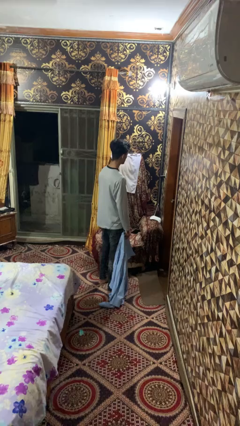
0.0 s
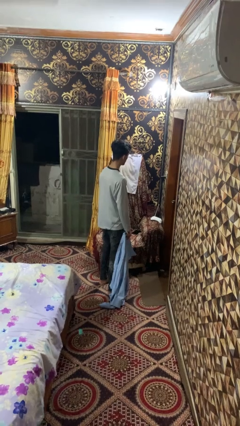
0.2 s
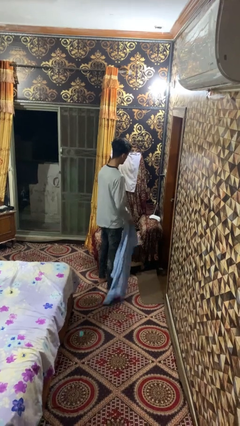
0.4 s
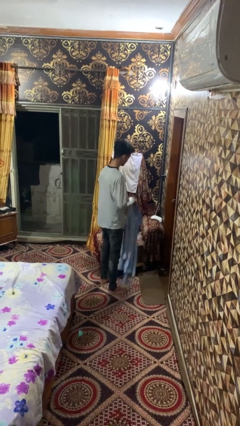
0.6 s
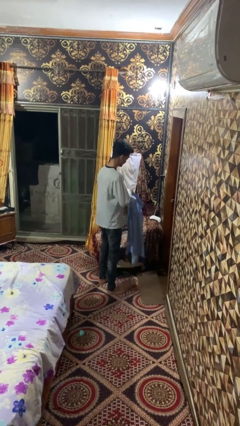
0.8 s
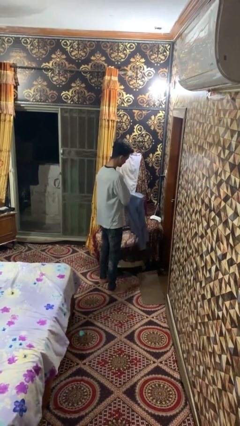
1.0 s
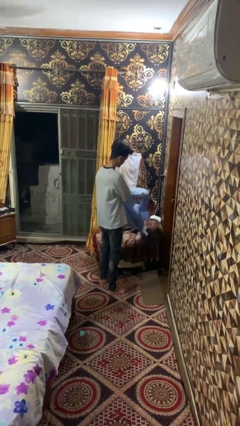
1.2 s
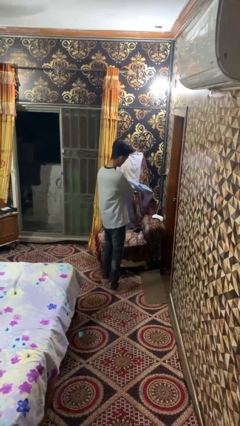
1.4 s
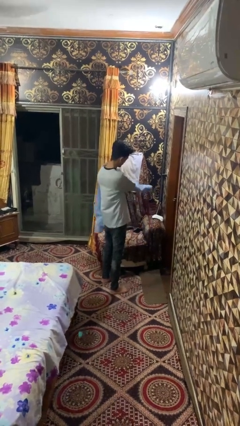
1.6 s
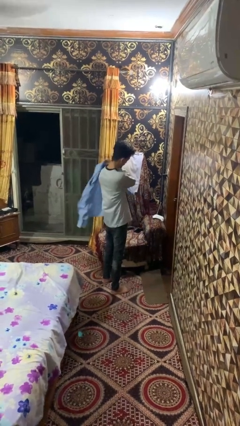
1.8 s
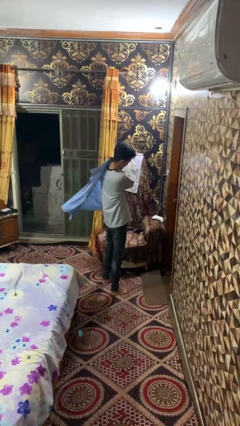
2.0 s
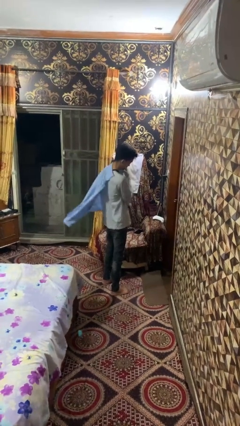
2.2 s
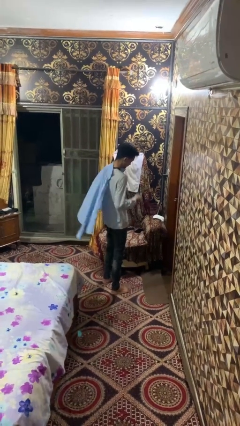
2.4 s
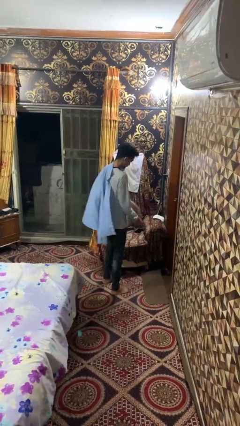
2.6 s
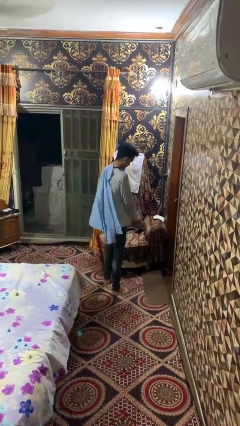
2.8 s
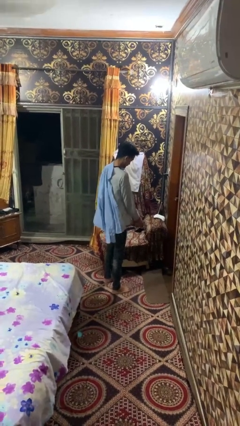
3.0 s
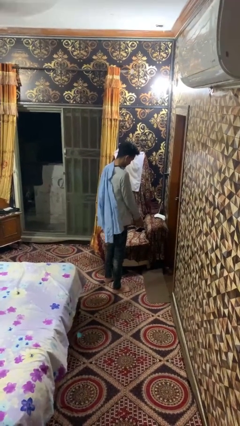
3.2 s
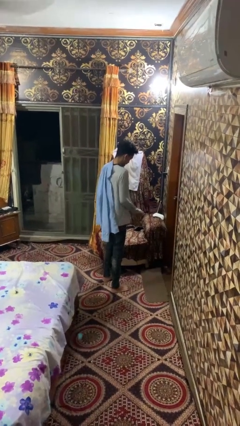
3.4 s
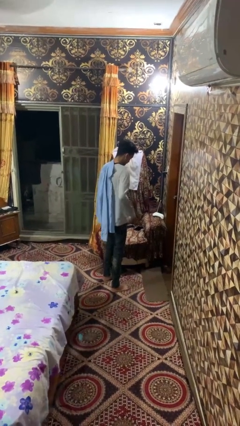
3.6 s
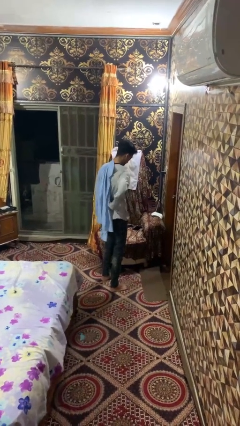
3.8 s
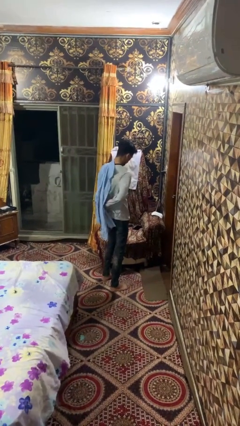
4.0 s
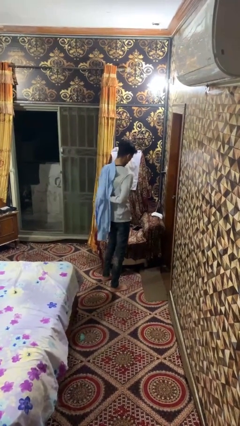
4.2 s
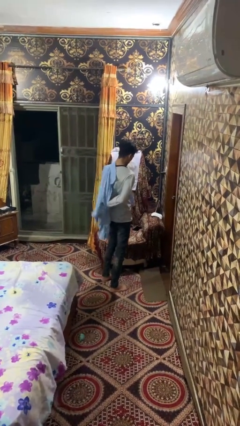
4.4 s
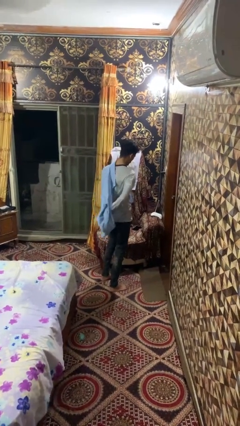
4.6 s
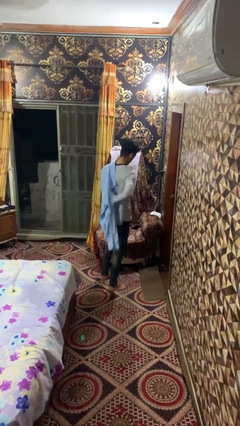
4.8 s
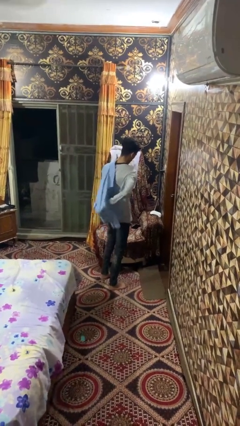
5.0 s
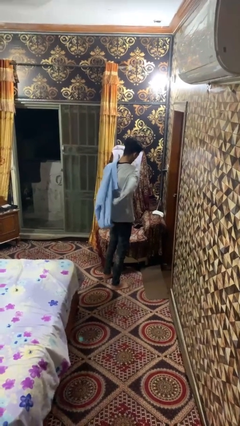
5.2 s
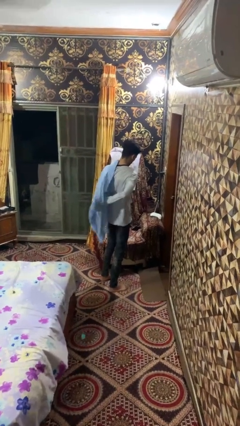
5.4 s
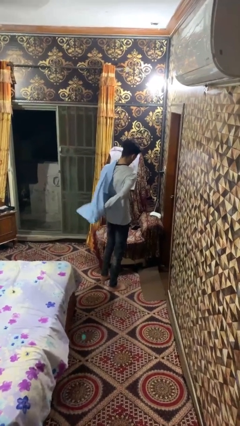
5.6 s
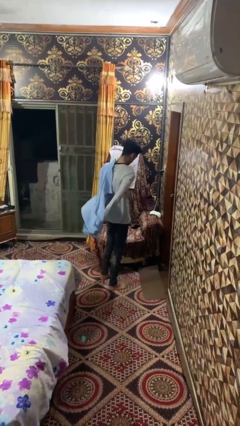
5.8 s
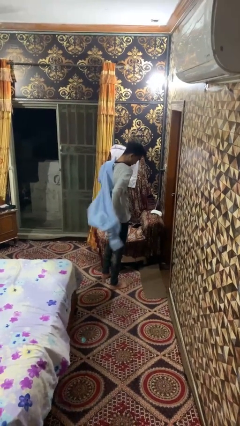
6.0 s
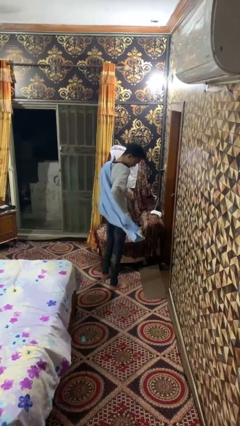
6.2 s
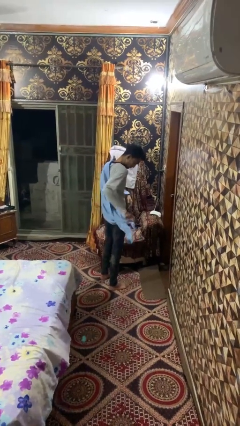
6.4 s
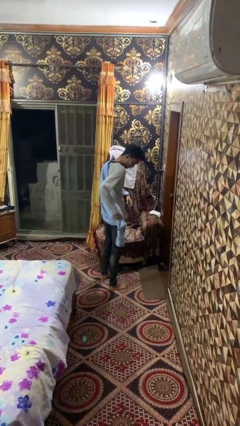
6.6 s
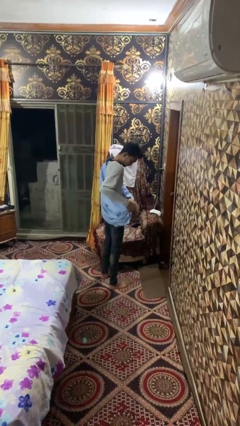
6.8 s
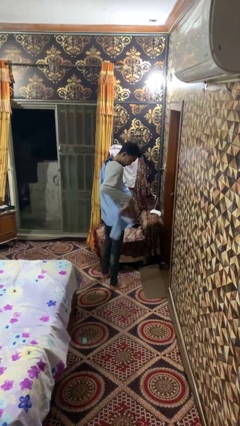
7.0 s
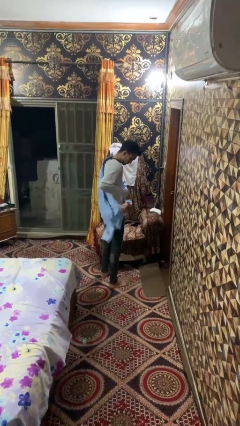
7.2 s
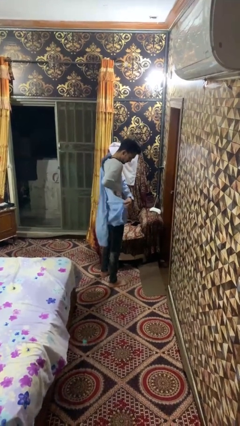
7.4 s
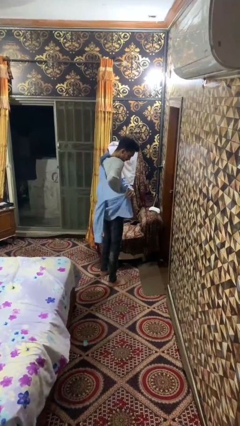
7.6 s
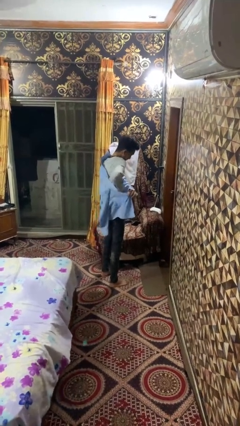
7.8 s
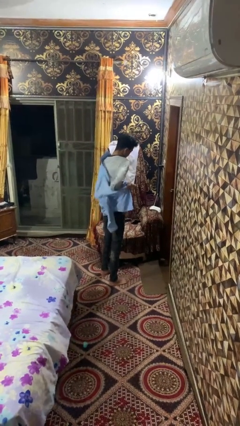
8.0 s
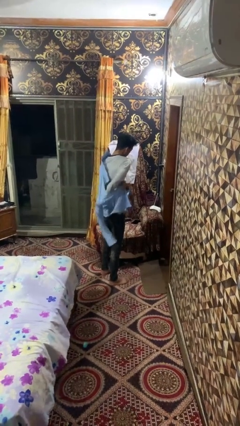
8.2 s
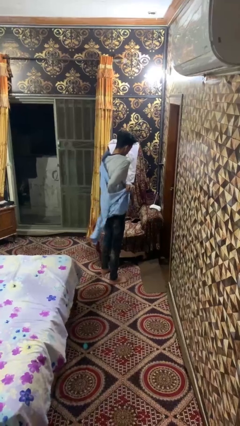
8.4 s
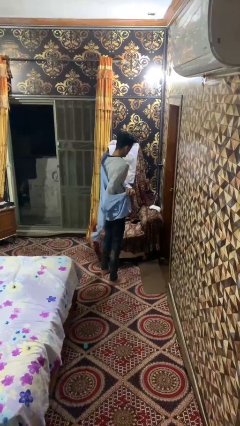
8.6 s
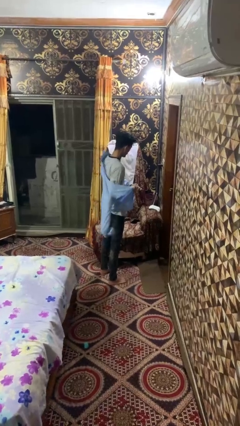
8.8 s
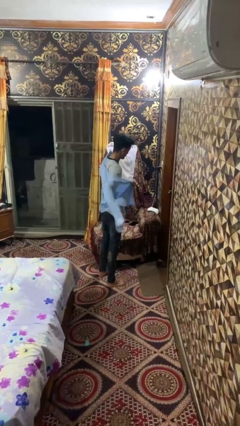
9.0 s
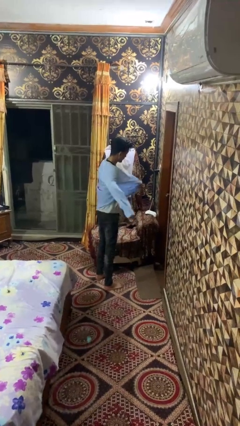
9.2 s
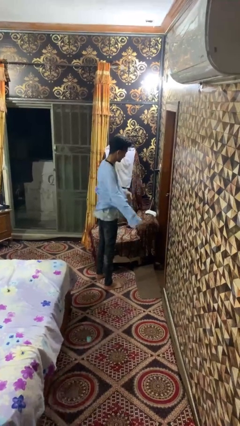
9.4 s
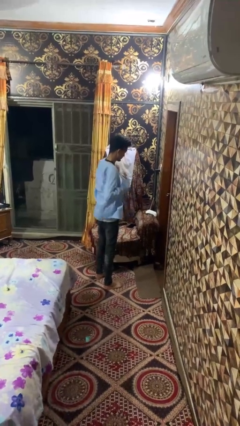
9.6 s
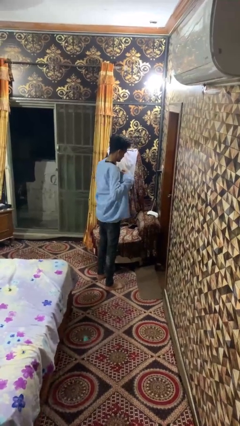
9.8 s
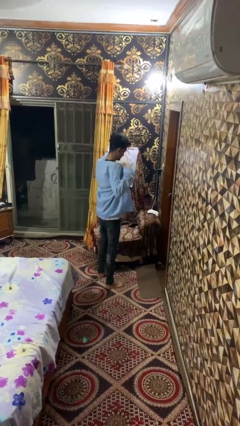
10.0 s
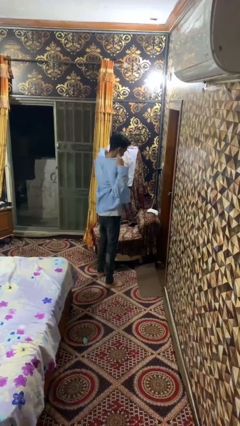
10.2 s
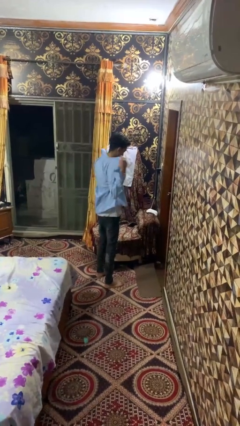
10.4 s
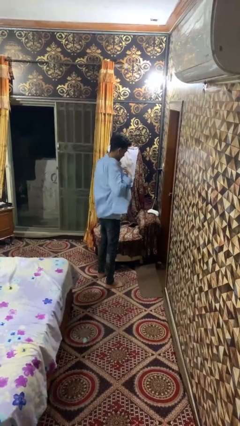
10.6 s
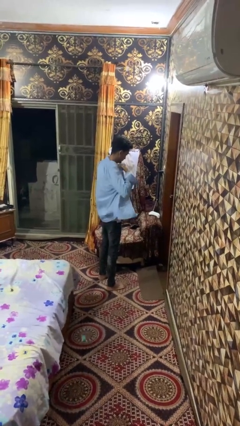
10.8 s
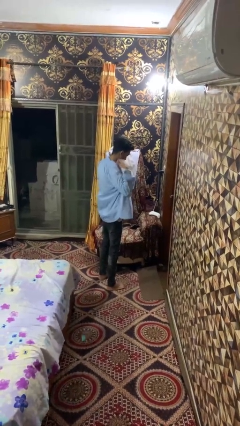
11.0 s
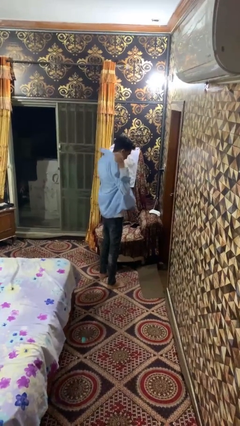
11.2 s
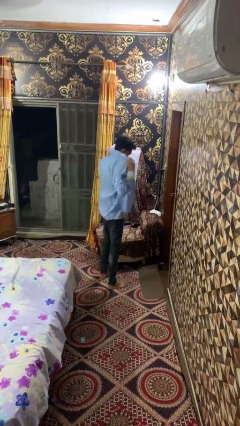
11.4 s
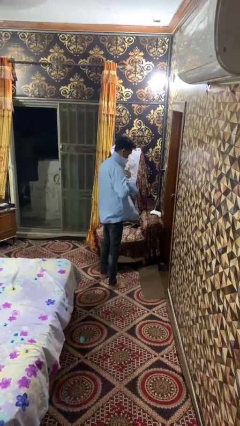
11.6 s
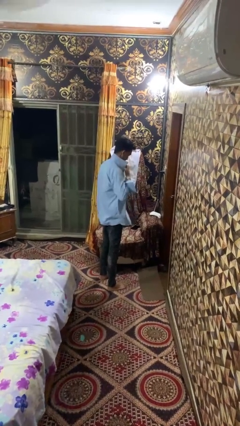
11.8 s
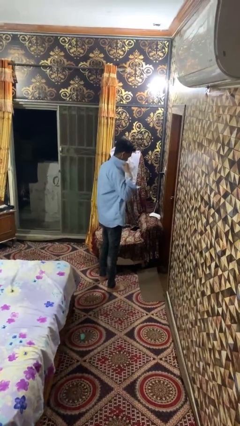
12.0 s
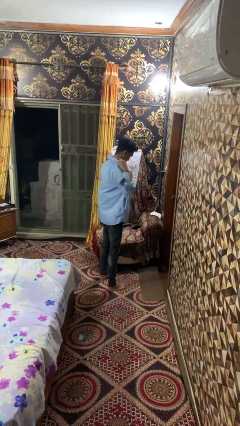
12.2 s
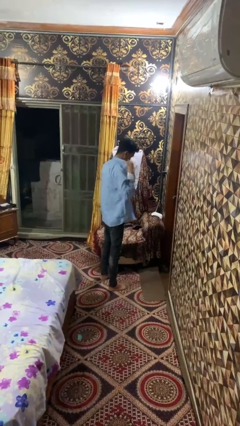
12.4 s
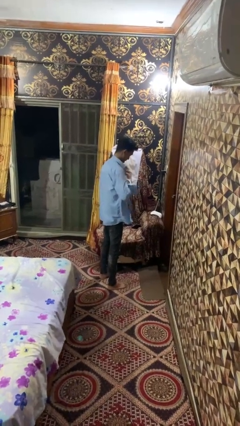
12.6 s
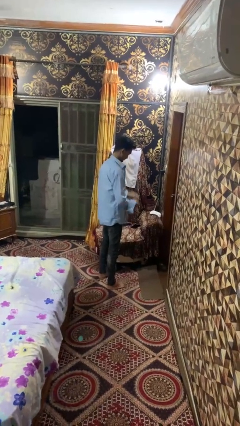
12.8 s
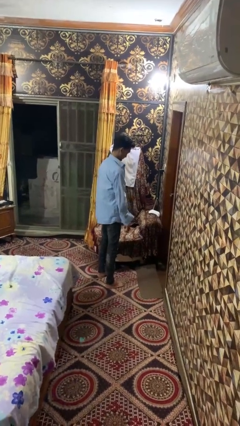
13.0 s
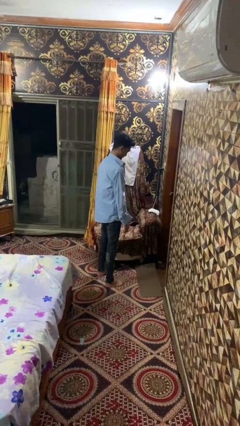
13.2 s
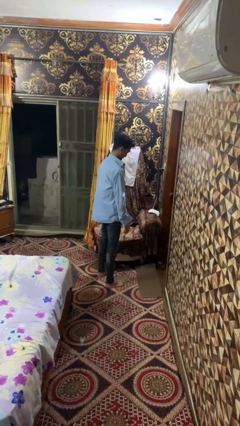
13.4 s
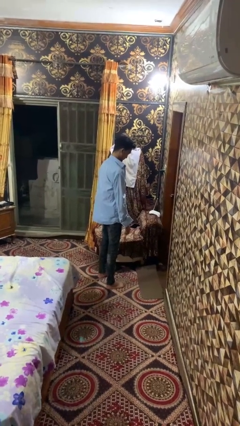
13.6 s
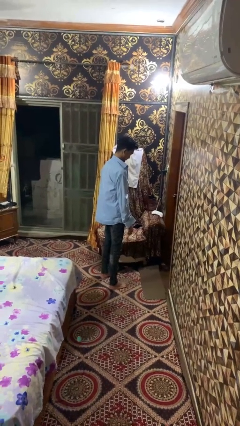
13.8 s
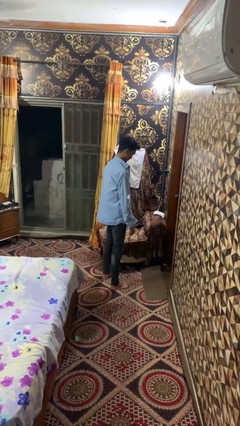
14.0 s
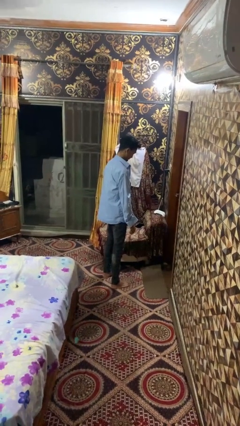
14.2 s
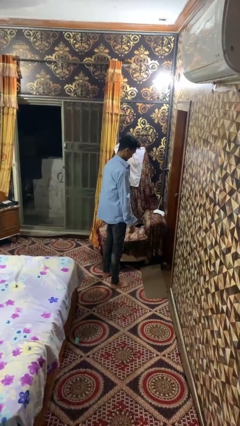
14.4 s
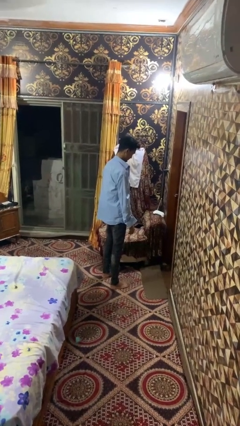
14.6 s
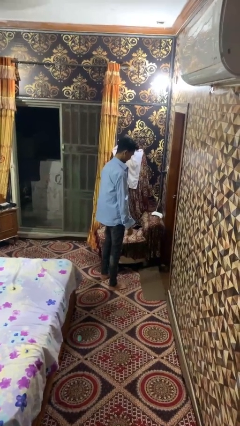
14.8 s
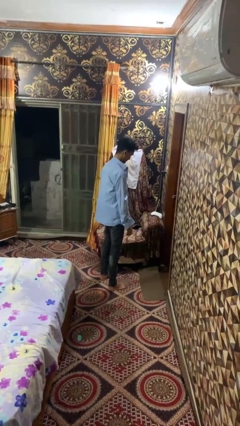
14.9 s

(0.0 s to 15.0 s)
person puts on shirt

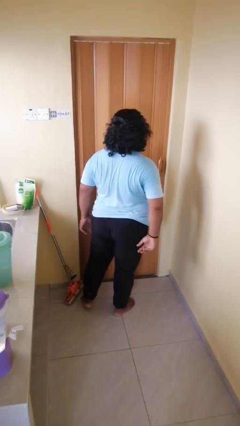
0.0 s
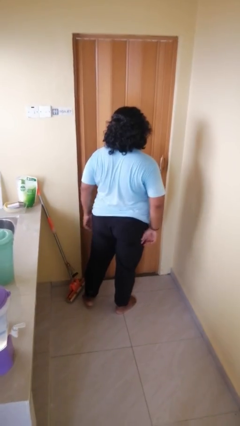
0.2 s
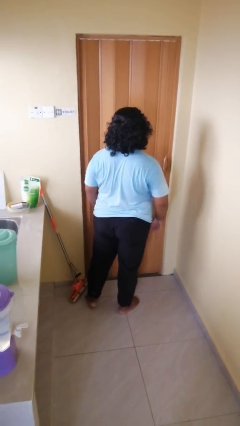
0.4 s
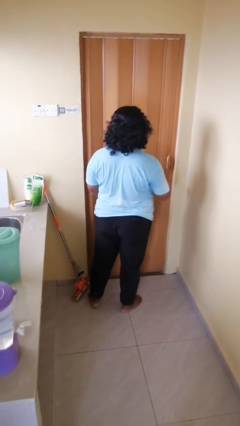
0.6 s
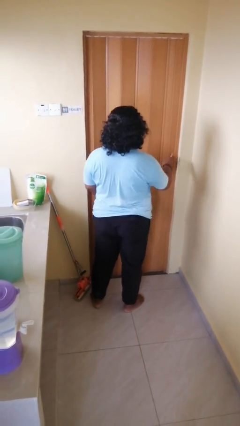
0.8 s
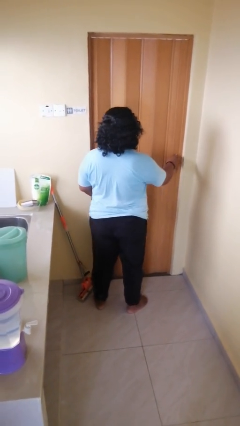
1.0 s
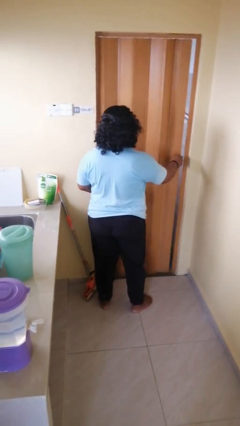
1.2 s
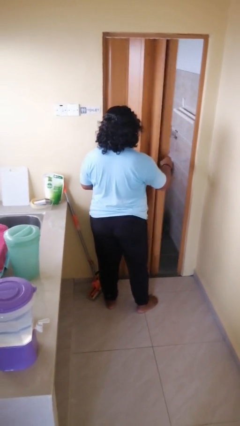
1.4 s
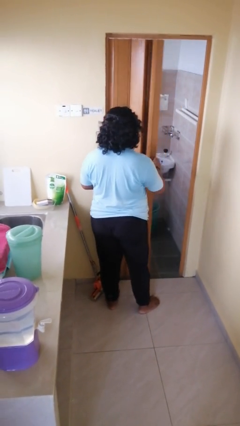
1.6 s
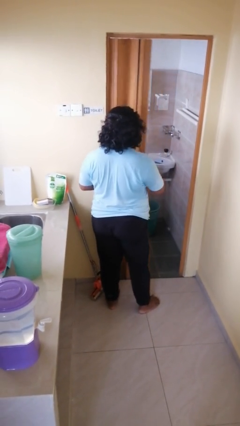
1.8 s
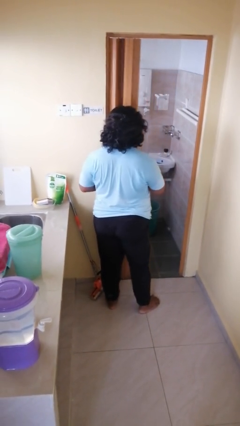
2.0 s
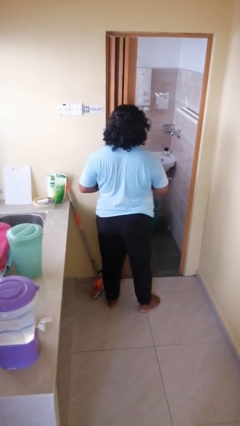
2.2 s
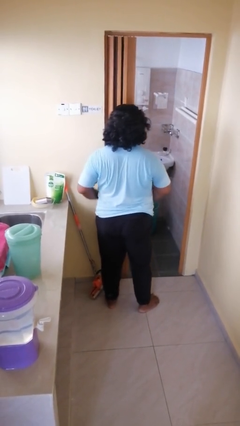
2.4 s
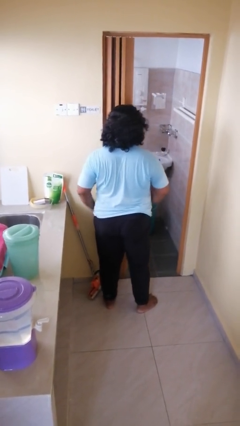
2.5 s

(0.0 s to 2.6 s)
person opens sliding door

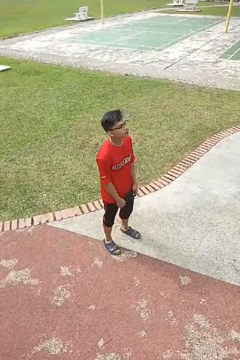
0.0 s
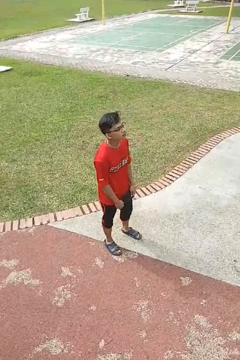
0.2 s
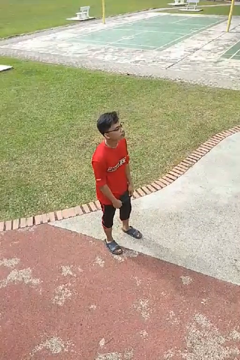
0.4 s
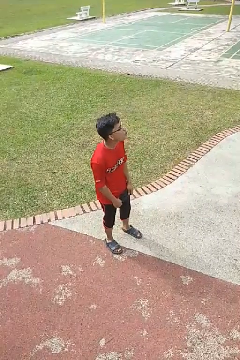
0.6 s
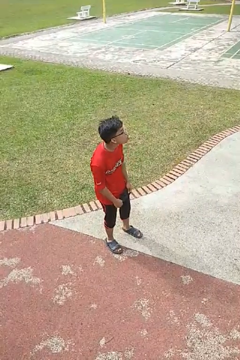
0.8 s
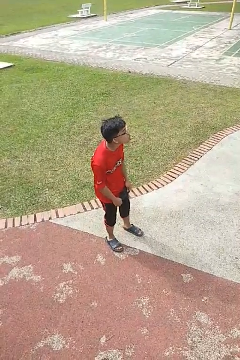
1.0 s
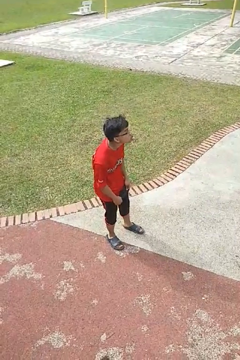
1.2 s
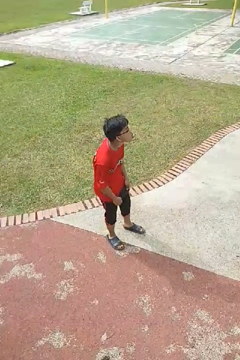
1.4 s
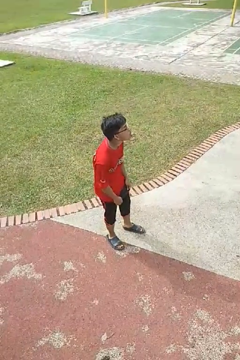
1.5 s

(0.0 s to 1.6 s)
person sticks out tongue
